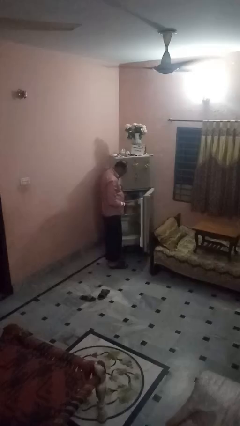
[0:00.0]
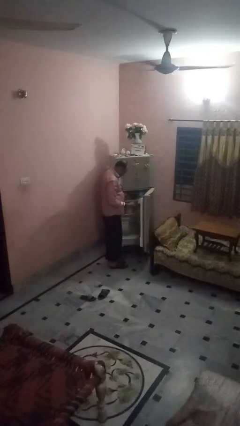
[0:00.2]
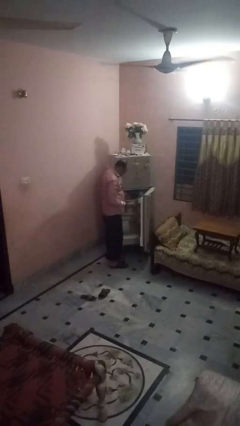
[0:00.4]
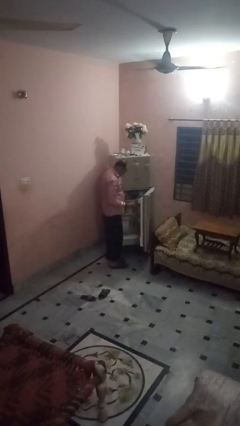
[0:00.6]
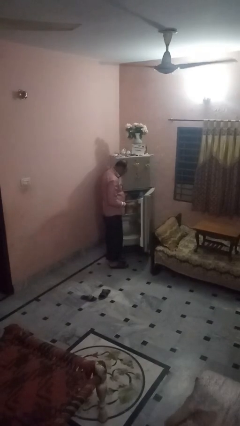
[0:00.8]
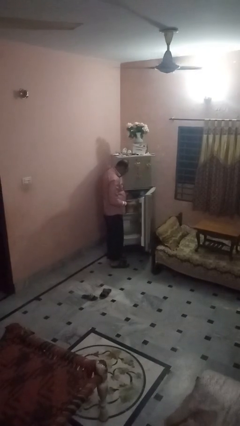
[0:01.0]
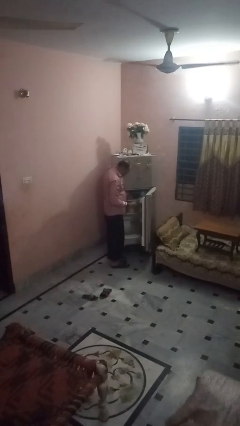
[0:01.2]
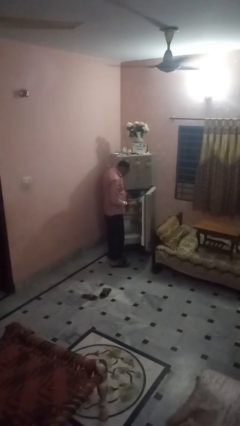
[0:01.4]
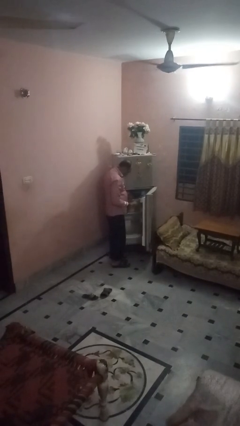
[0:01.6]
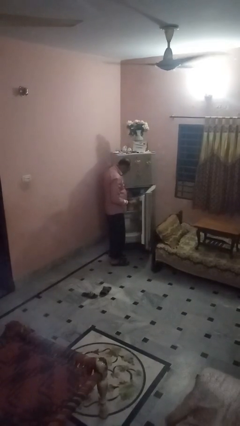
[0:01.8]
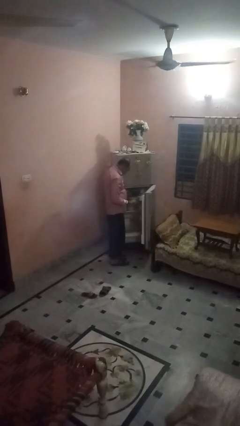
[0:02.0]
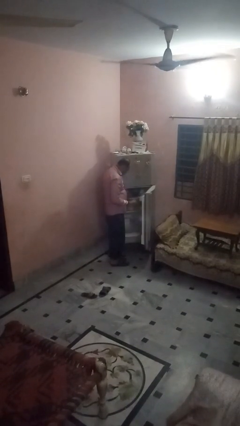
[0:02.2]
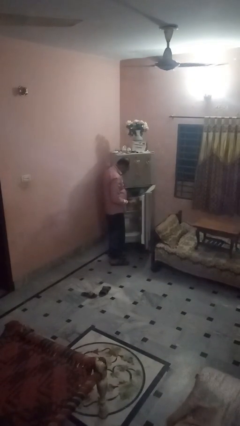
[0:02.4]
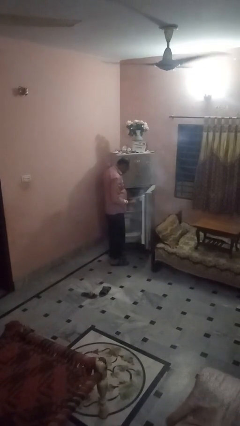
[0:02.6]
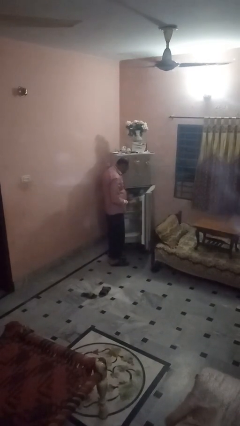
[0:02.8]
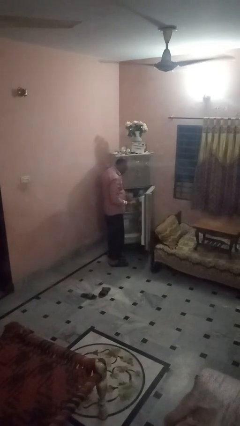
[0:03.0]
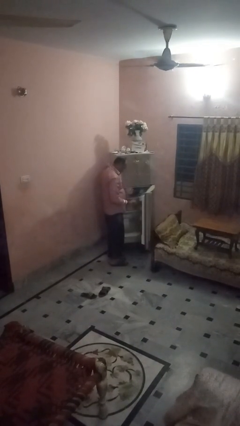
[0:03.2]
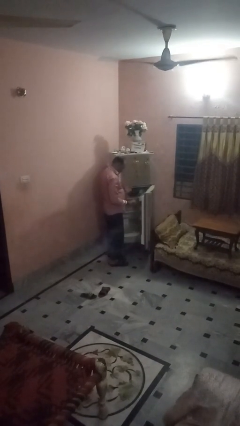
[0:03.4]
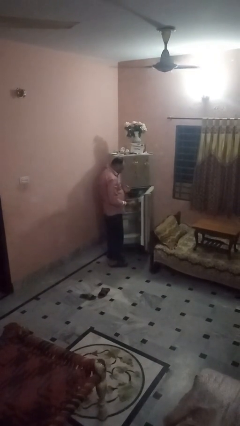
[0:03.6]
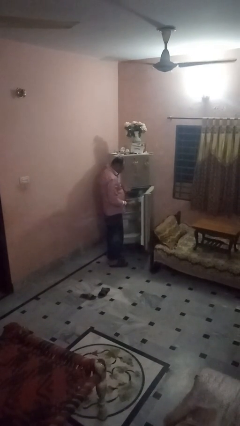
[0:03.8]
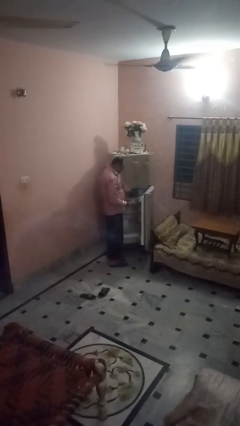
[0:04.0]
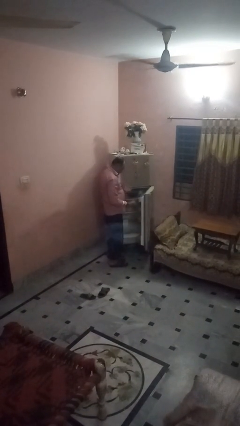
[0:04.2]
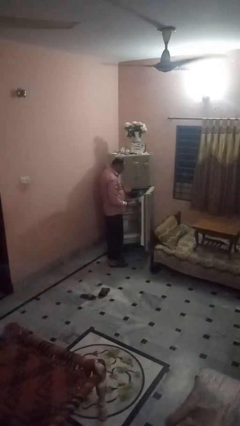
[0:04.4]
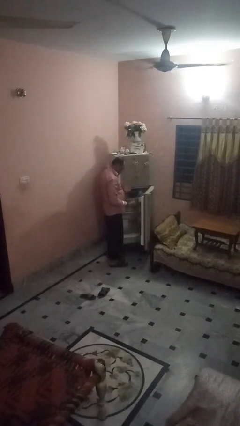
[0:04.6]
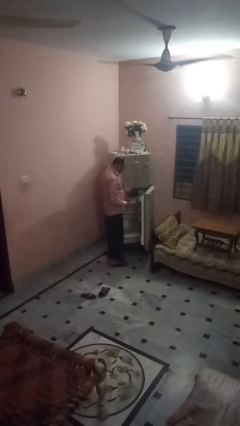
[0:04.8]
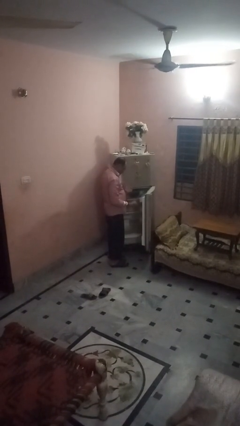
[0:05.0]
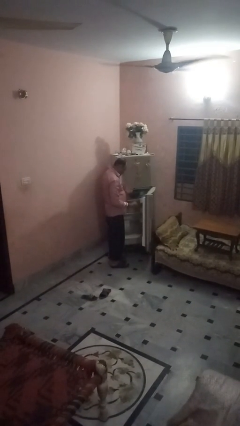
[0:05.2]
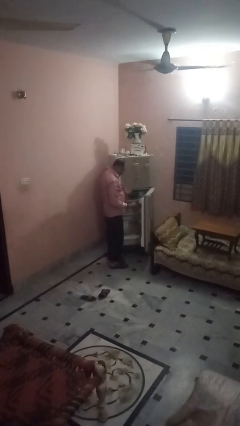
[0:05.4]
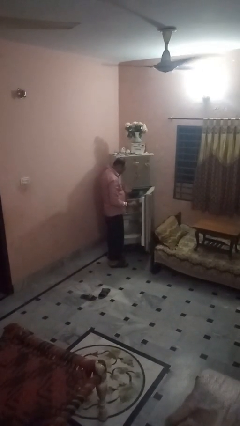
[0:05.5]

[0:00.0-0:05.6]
person puts object into refrigerator

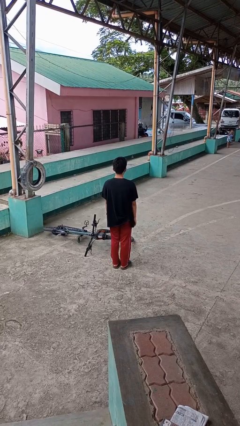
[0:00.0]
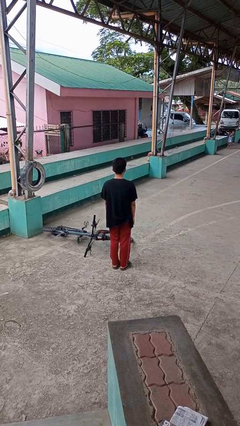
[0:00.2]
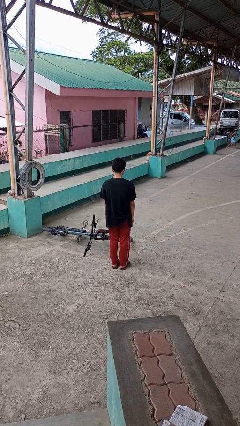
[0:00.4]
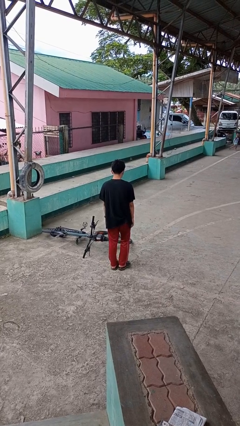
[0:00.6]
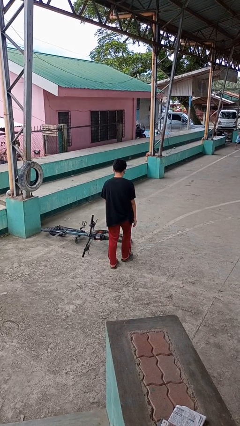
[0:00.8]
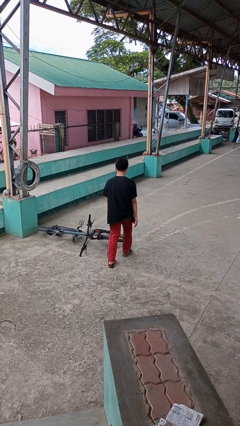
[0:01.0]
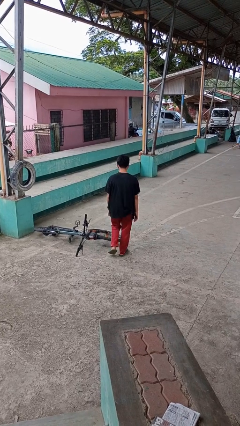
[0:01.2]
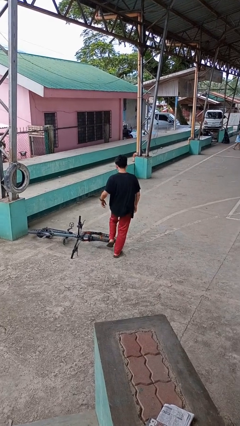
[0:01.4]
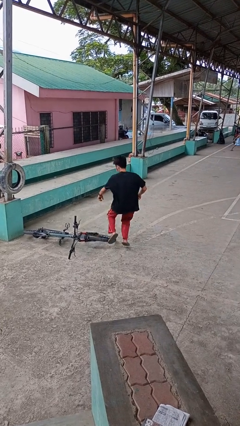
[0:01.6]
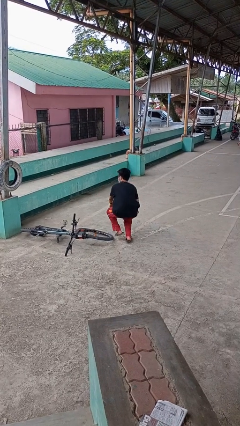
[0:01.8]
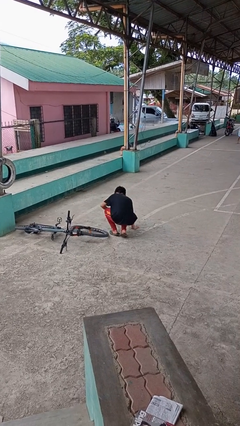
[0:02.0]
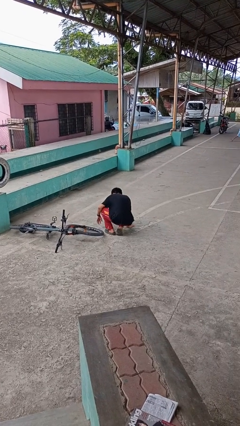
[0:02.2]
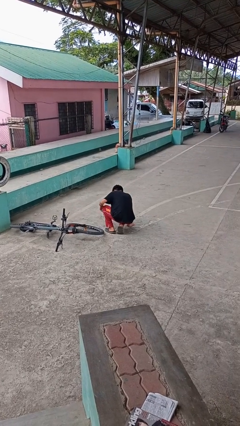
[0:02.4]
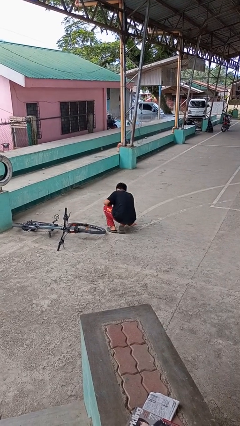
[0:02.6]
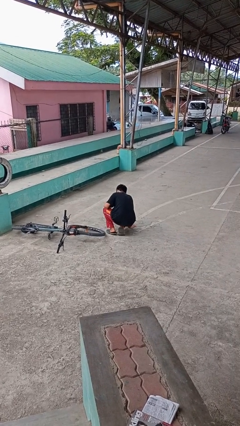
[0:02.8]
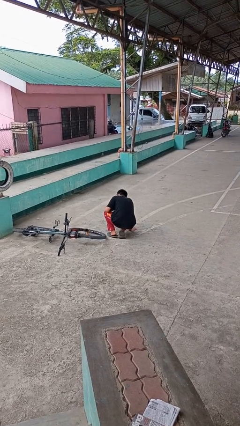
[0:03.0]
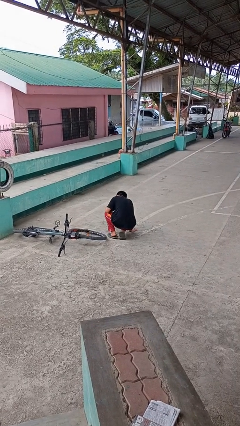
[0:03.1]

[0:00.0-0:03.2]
person trips on object on floor

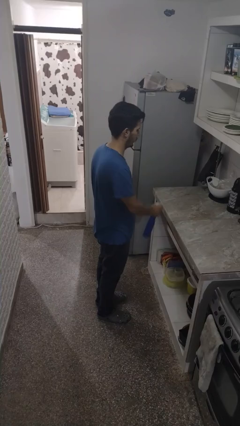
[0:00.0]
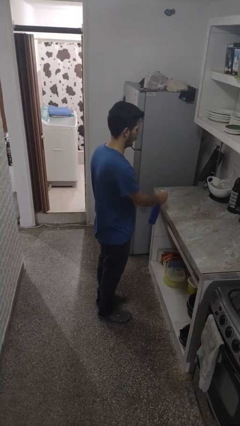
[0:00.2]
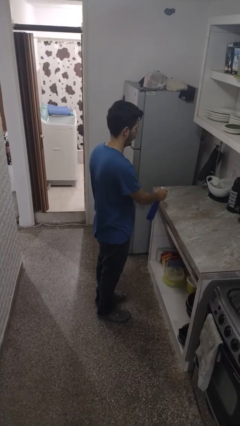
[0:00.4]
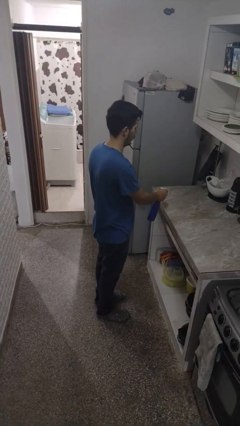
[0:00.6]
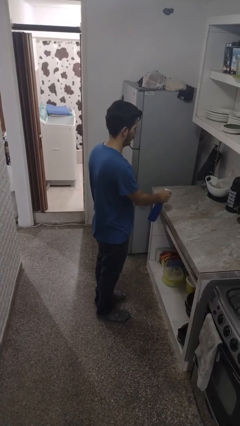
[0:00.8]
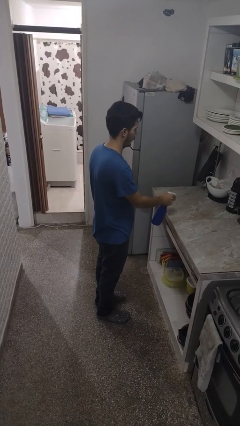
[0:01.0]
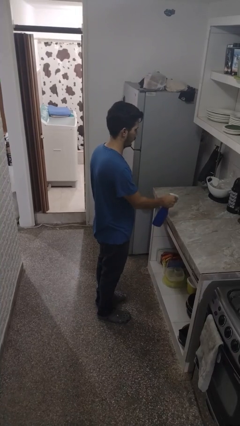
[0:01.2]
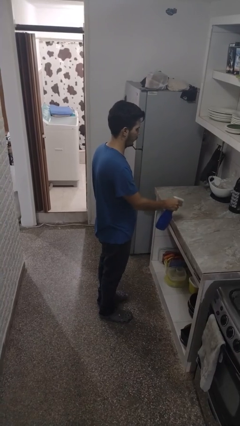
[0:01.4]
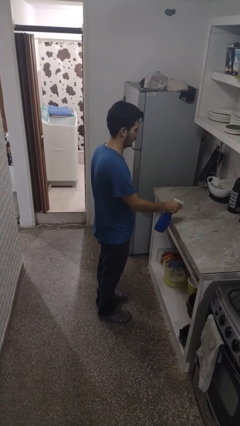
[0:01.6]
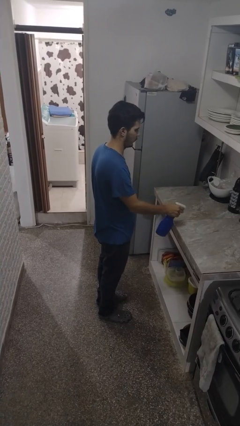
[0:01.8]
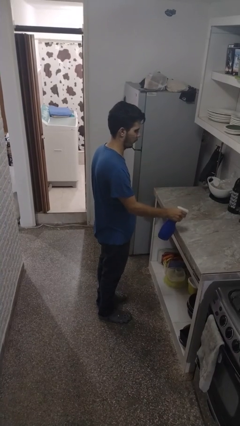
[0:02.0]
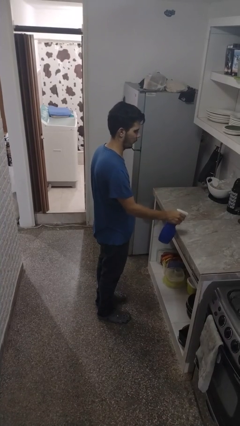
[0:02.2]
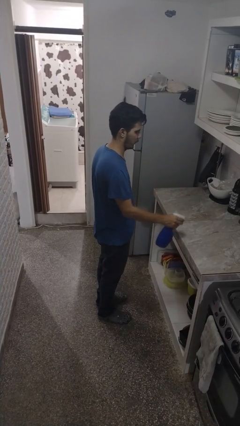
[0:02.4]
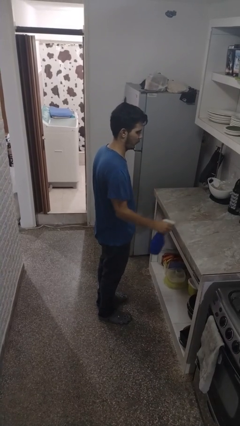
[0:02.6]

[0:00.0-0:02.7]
person sprays from bottle

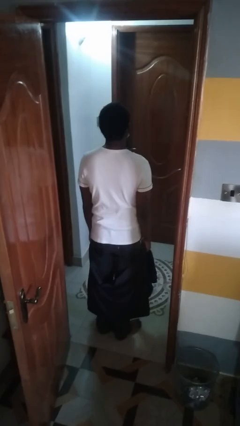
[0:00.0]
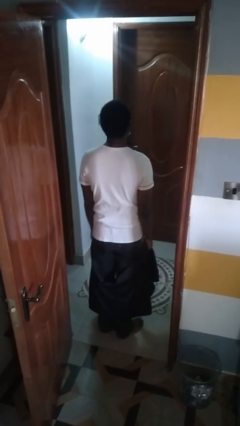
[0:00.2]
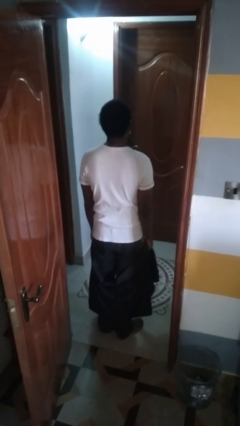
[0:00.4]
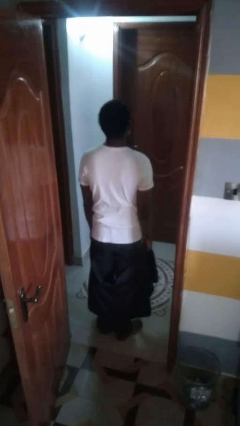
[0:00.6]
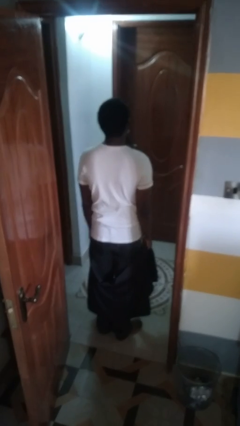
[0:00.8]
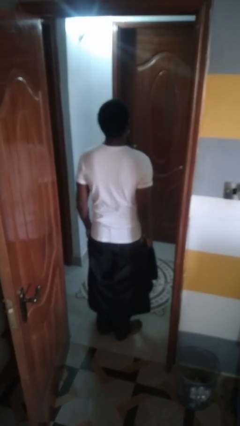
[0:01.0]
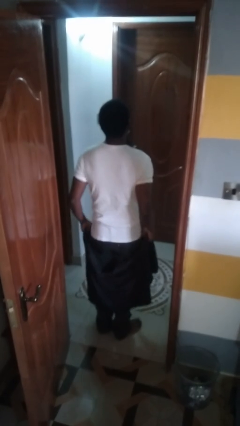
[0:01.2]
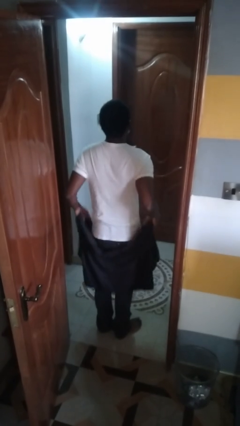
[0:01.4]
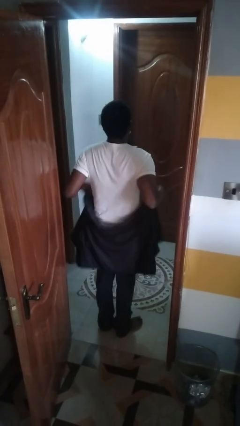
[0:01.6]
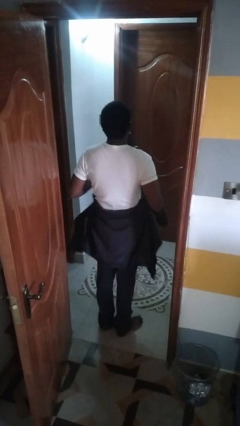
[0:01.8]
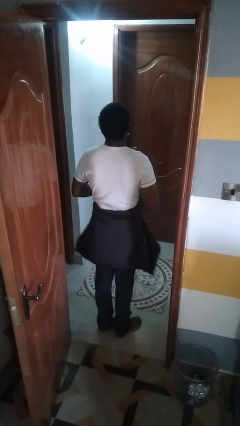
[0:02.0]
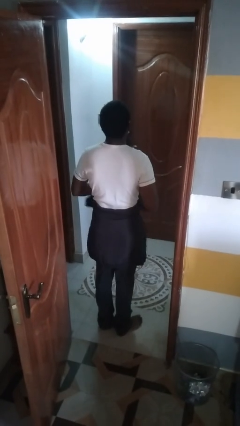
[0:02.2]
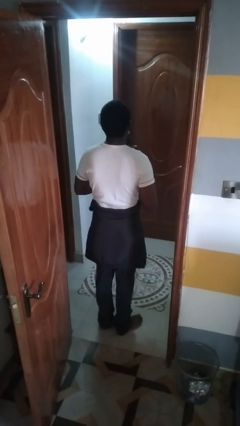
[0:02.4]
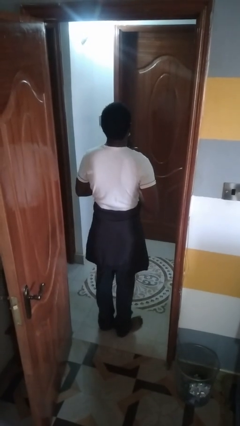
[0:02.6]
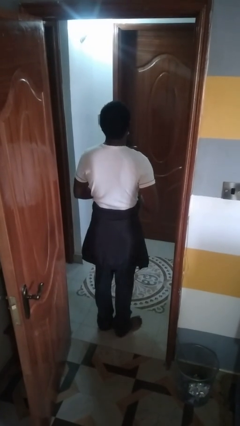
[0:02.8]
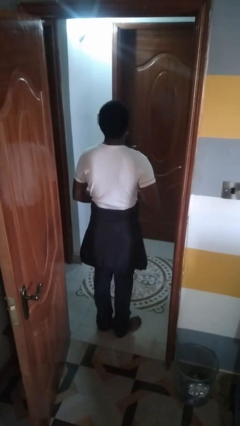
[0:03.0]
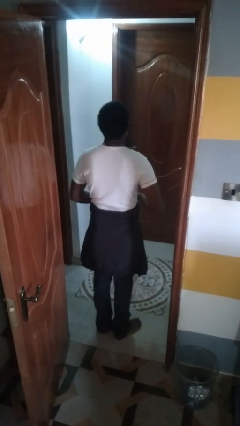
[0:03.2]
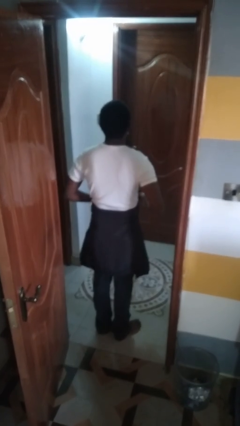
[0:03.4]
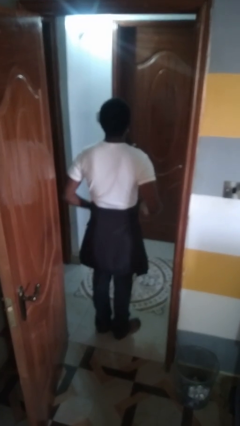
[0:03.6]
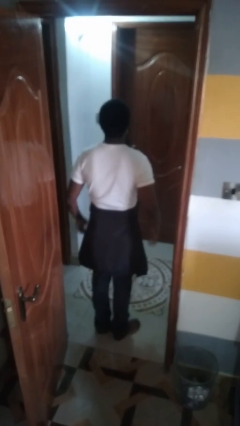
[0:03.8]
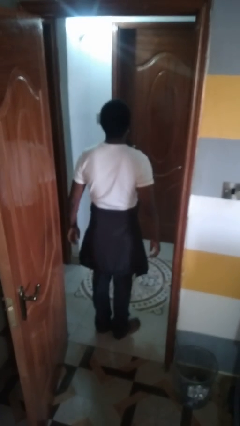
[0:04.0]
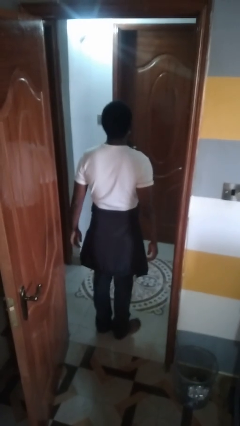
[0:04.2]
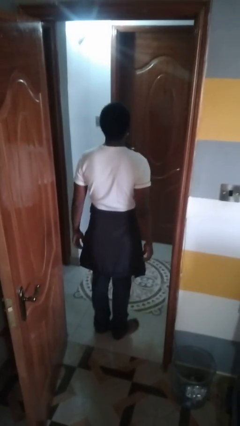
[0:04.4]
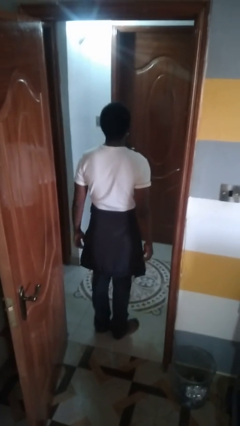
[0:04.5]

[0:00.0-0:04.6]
person ties jacket around waist

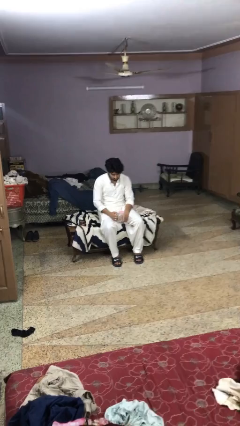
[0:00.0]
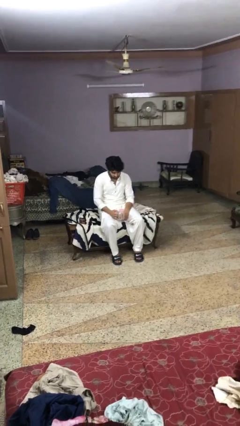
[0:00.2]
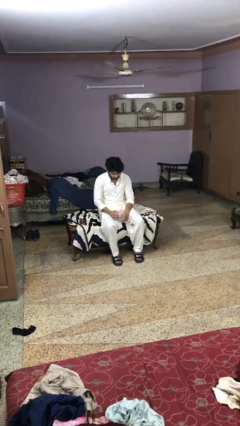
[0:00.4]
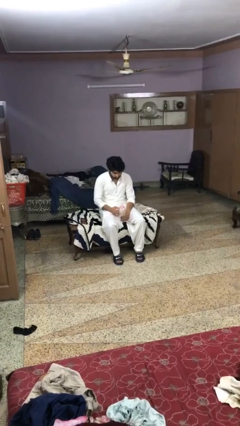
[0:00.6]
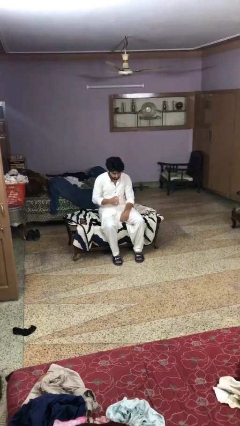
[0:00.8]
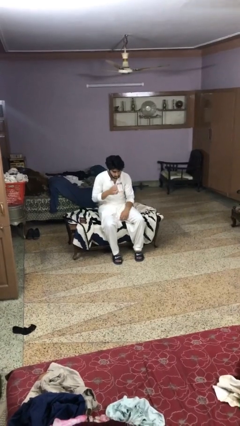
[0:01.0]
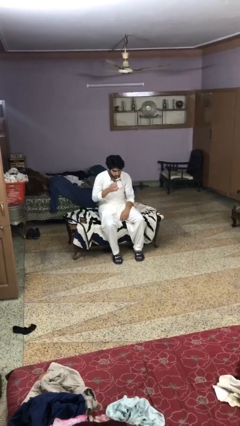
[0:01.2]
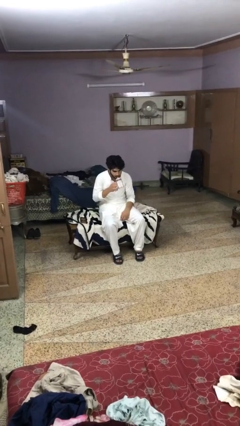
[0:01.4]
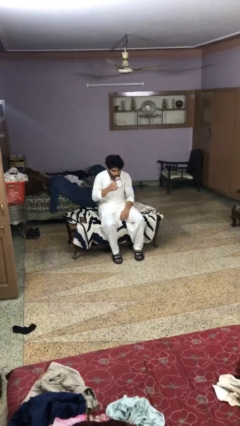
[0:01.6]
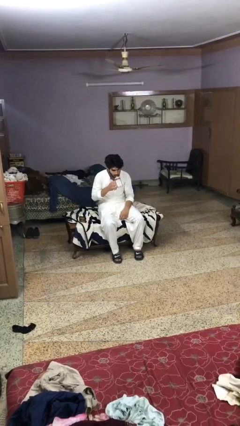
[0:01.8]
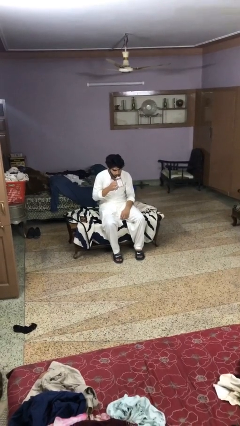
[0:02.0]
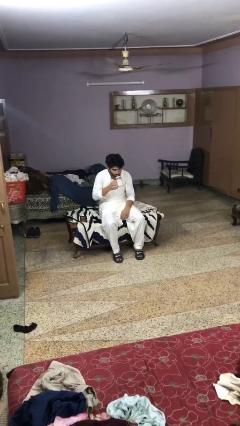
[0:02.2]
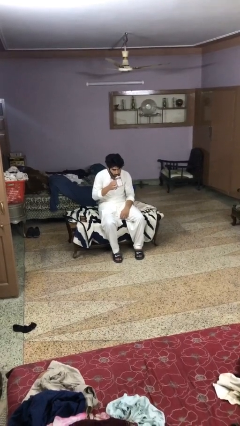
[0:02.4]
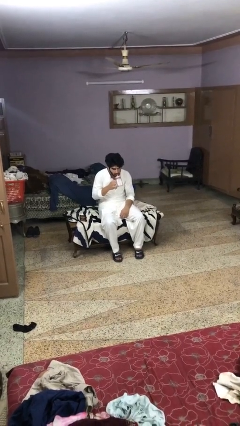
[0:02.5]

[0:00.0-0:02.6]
person drinks from straw
